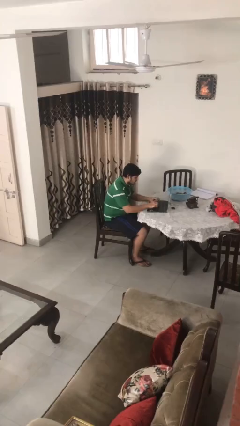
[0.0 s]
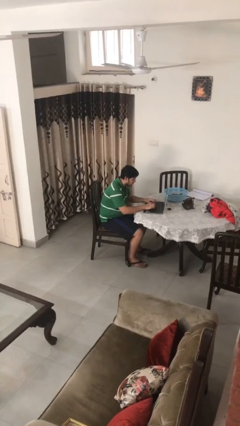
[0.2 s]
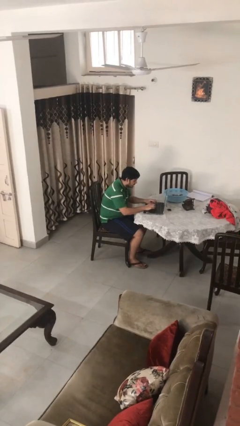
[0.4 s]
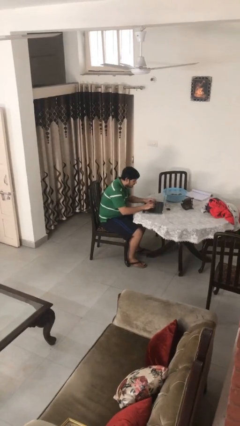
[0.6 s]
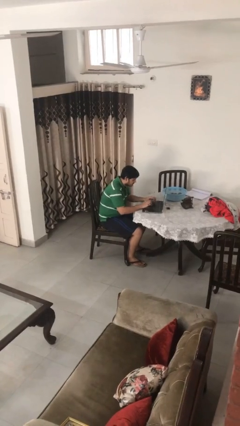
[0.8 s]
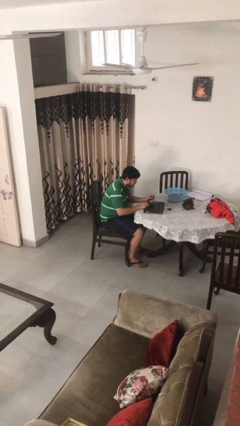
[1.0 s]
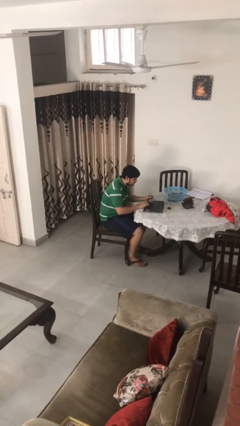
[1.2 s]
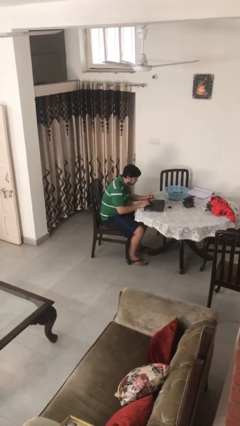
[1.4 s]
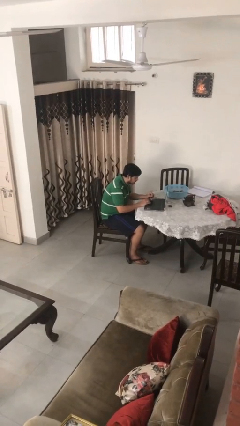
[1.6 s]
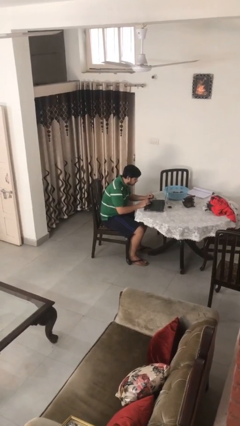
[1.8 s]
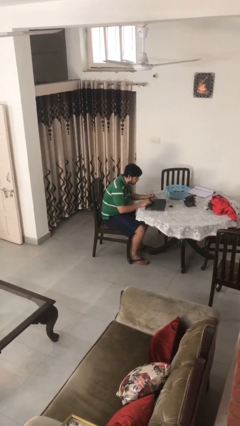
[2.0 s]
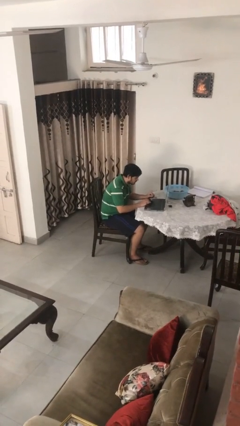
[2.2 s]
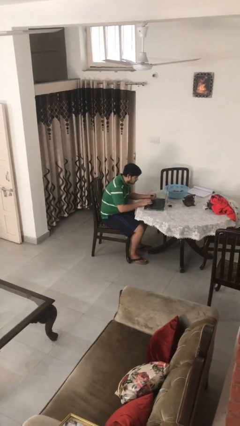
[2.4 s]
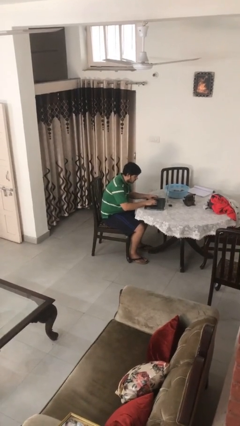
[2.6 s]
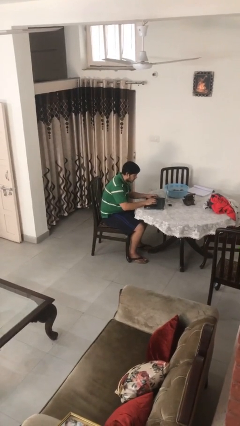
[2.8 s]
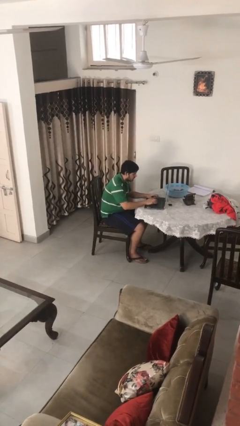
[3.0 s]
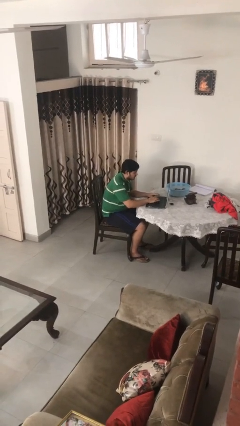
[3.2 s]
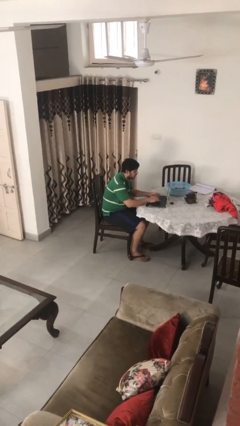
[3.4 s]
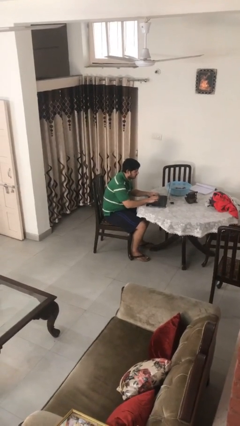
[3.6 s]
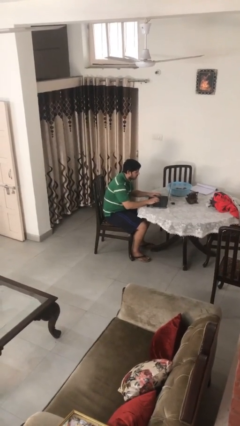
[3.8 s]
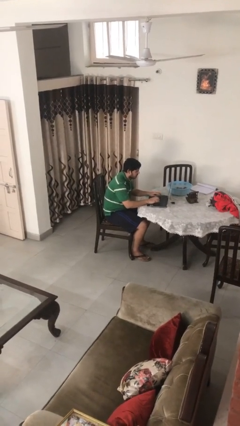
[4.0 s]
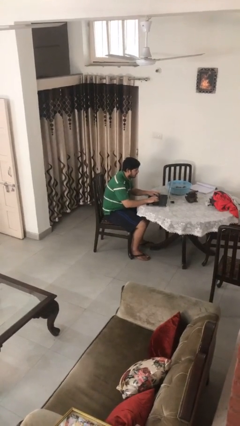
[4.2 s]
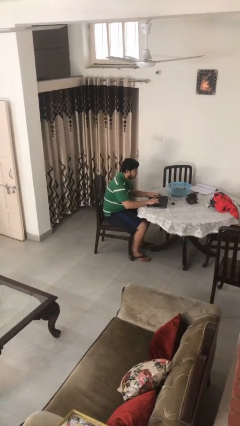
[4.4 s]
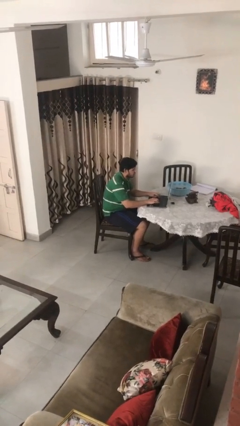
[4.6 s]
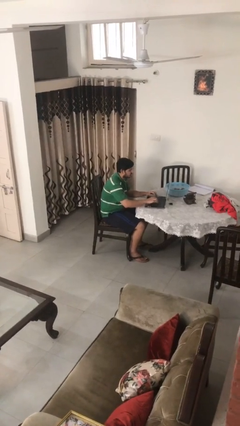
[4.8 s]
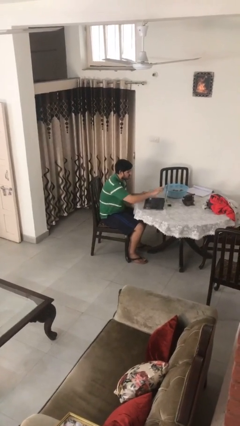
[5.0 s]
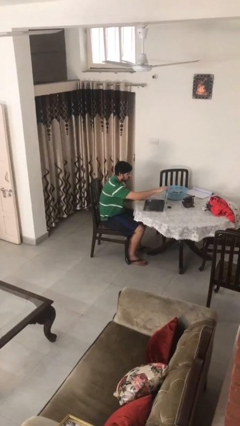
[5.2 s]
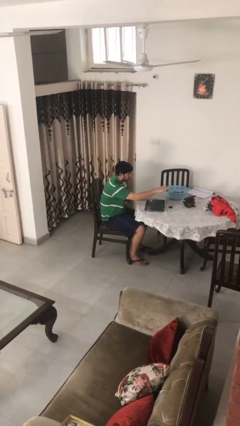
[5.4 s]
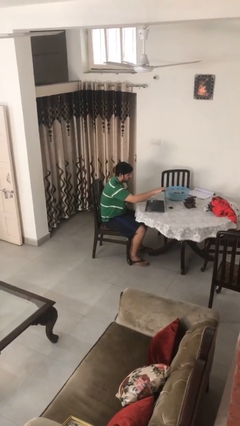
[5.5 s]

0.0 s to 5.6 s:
person interacts with laptop

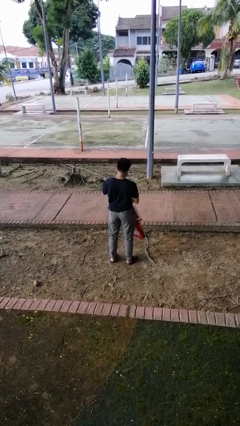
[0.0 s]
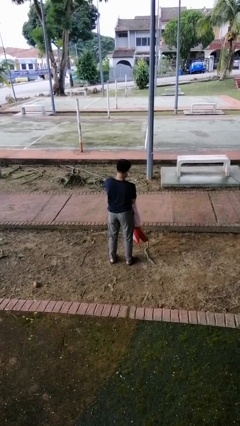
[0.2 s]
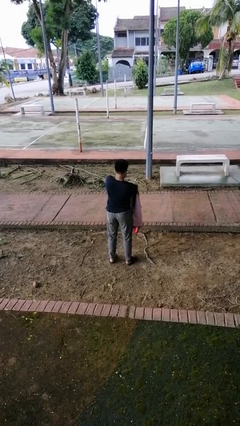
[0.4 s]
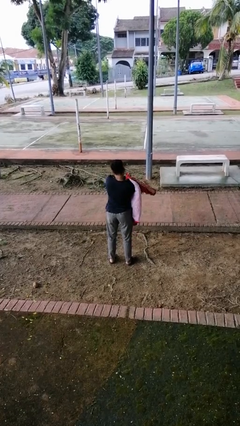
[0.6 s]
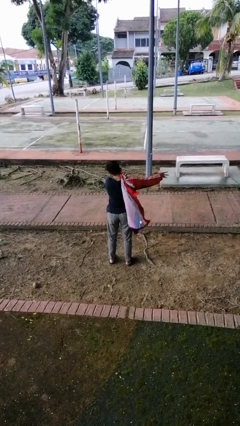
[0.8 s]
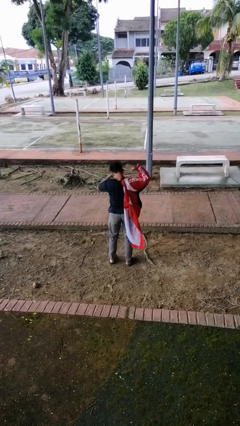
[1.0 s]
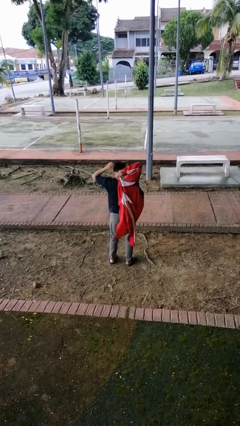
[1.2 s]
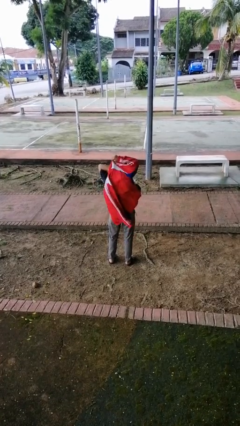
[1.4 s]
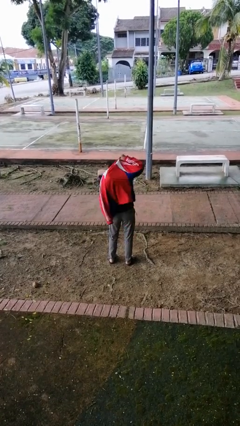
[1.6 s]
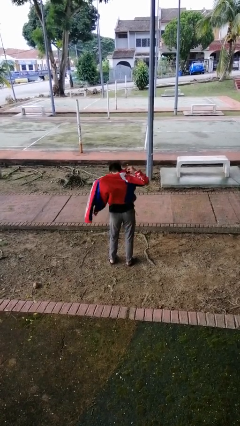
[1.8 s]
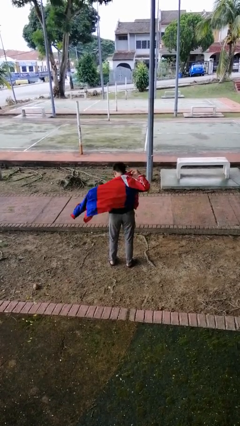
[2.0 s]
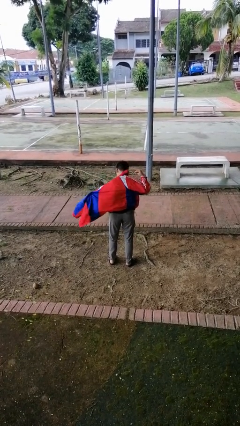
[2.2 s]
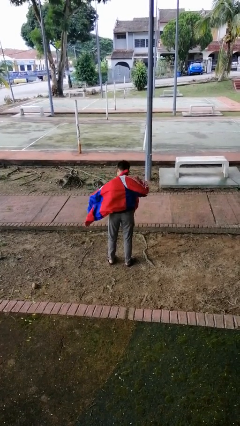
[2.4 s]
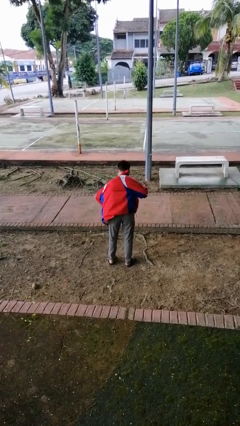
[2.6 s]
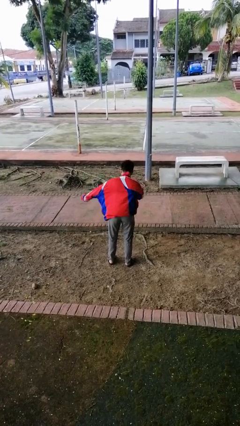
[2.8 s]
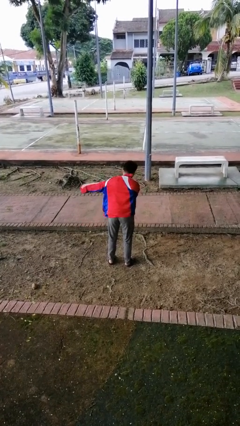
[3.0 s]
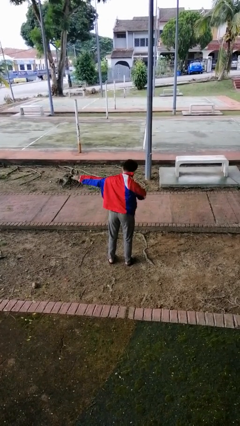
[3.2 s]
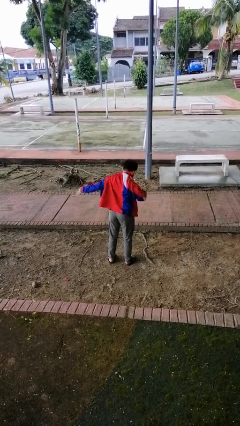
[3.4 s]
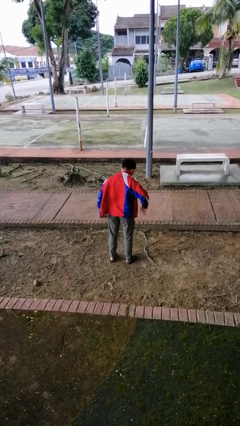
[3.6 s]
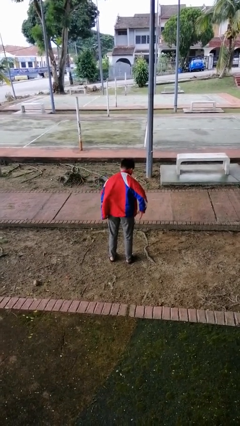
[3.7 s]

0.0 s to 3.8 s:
person puts on jacket

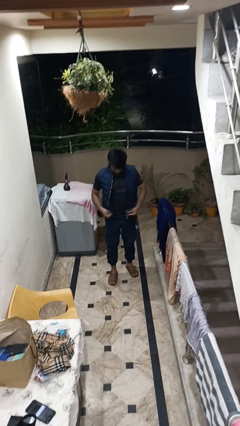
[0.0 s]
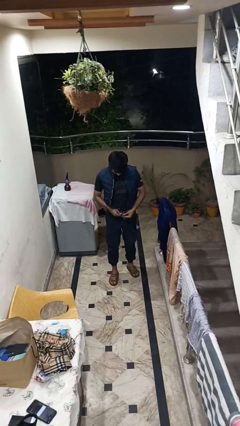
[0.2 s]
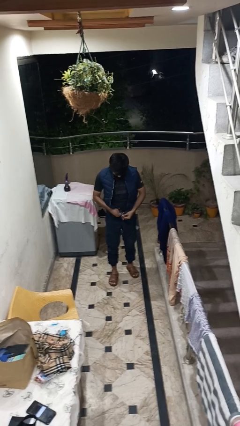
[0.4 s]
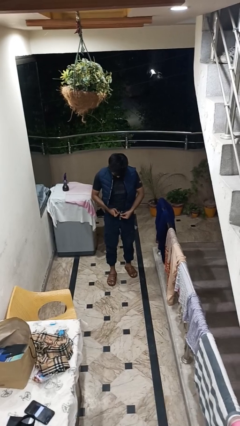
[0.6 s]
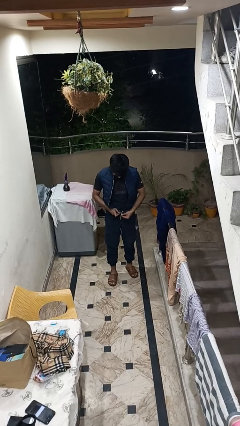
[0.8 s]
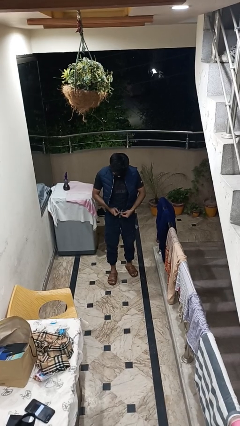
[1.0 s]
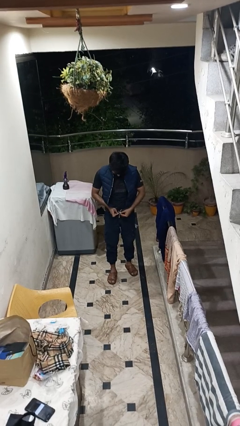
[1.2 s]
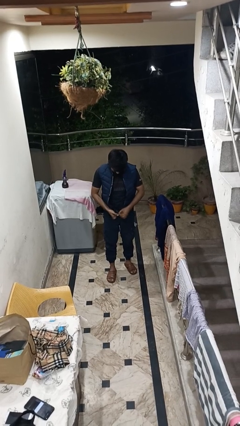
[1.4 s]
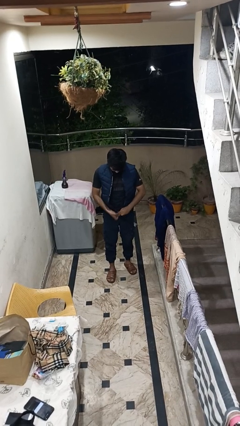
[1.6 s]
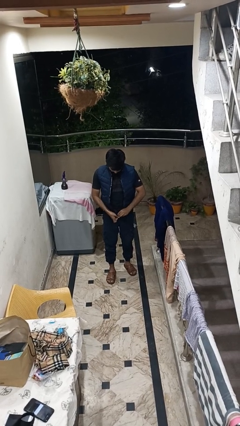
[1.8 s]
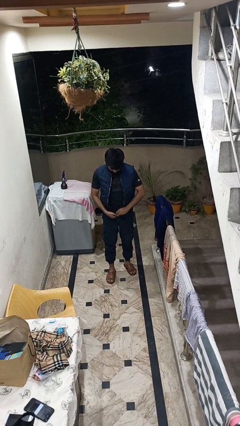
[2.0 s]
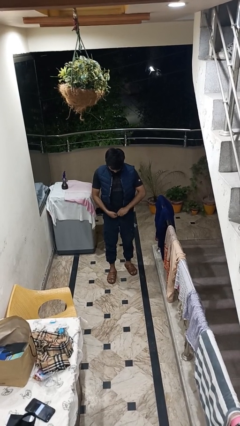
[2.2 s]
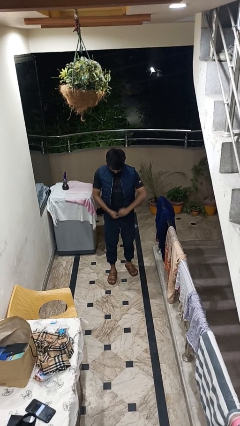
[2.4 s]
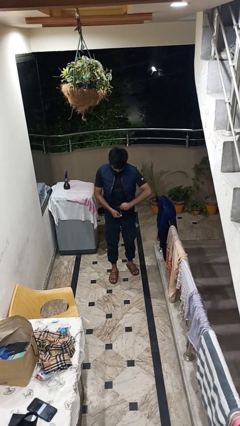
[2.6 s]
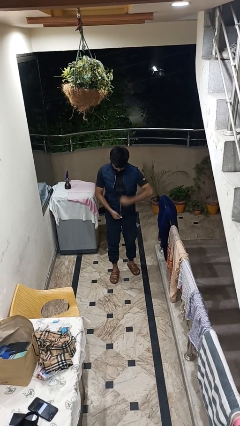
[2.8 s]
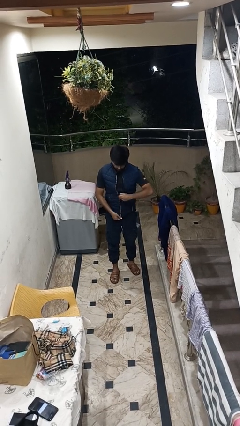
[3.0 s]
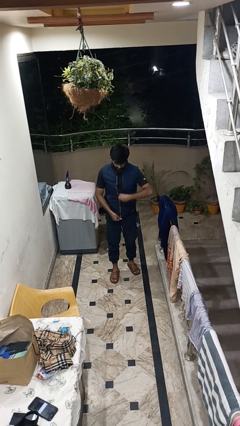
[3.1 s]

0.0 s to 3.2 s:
person zips up jacket

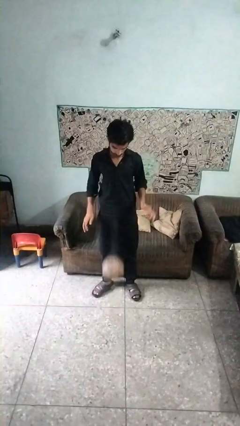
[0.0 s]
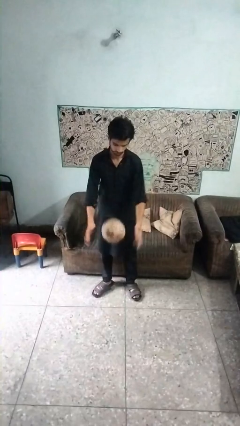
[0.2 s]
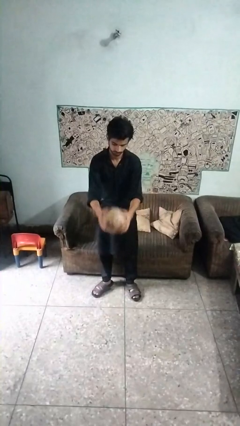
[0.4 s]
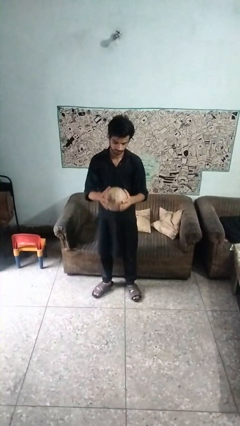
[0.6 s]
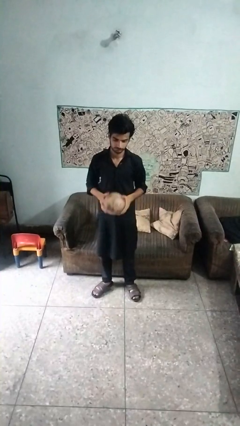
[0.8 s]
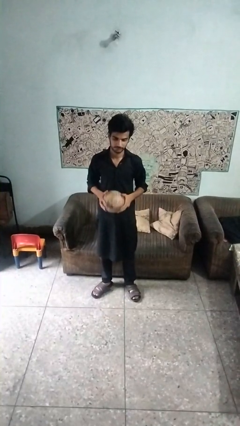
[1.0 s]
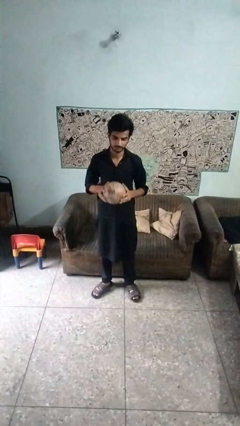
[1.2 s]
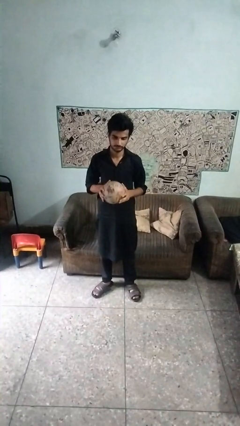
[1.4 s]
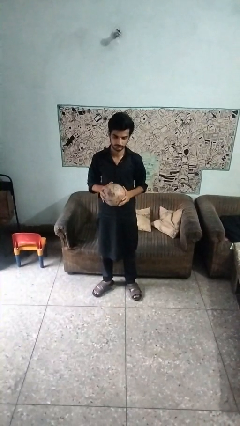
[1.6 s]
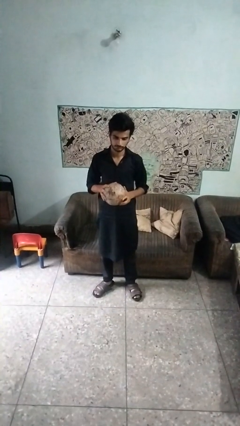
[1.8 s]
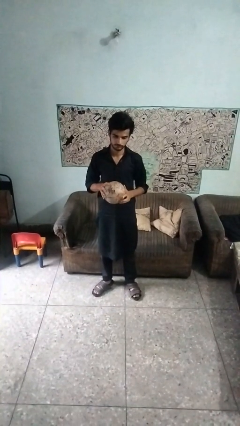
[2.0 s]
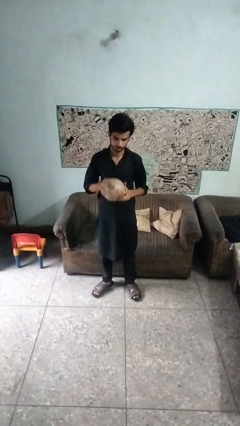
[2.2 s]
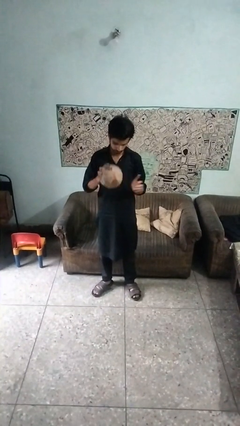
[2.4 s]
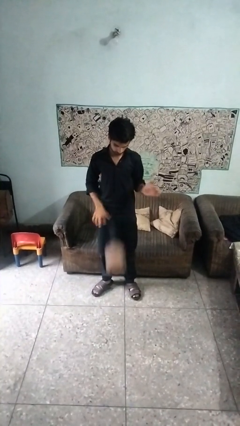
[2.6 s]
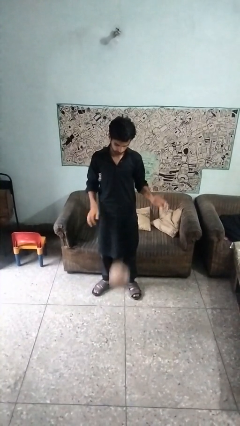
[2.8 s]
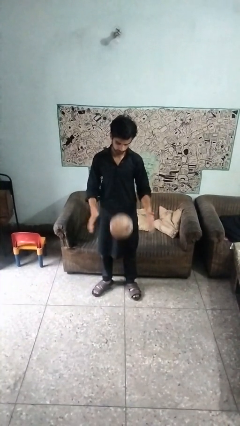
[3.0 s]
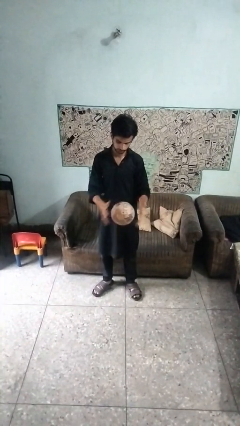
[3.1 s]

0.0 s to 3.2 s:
person puts on hoodie

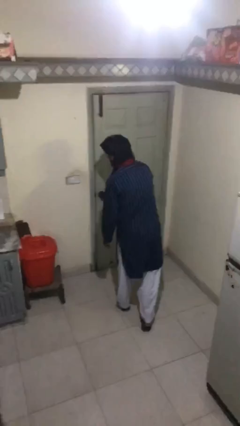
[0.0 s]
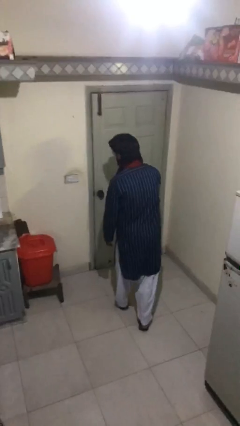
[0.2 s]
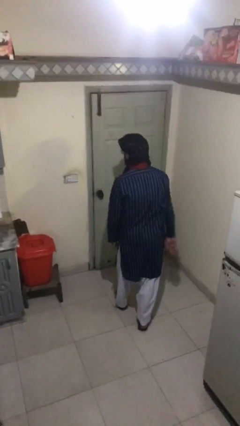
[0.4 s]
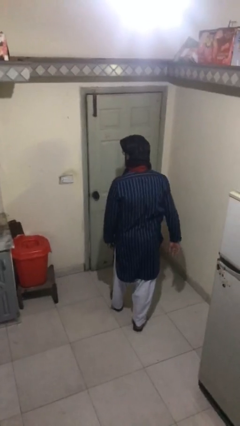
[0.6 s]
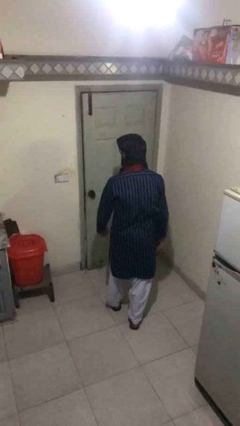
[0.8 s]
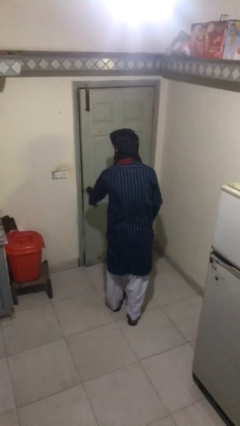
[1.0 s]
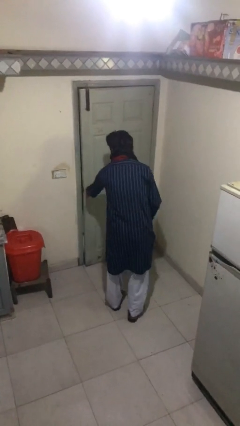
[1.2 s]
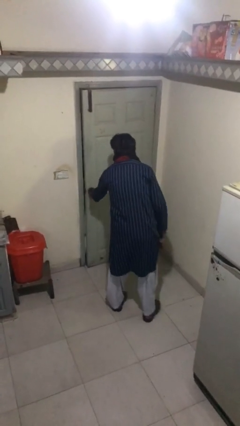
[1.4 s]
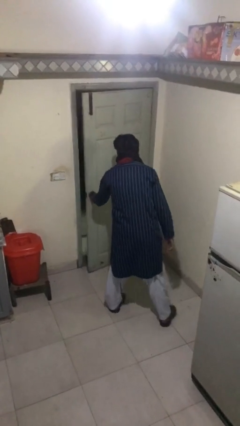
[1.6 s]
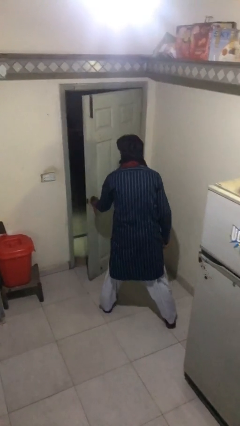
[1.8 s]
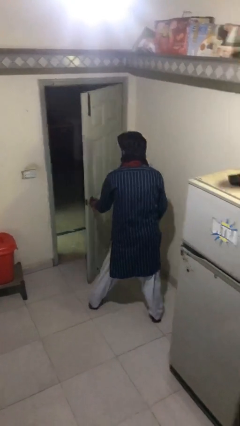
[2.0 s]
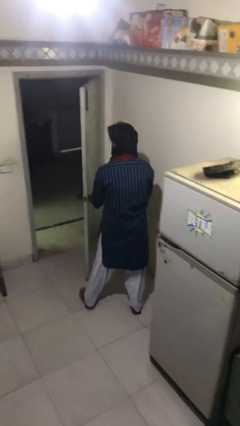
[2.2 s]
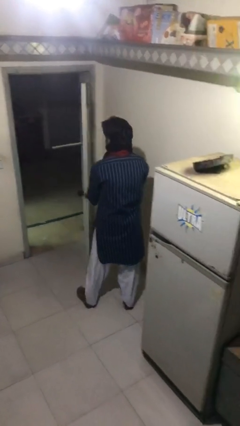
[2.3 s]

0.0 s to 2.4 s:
person opens facility door
